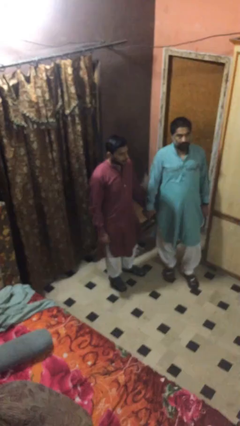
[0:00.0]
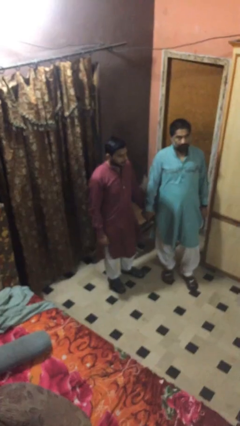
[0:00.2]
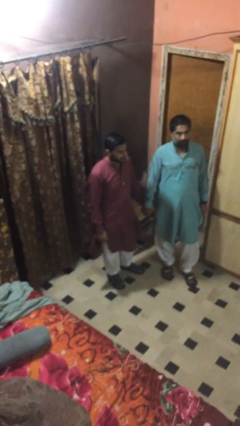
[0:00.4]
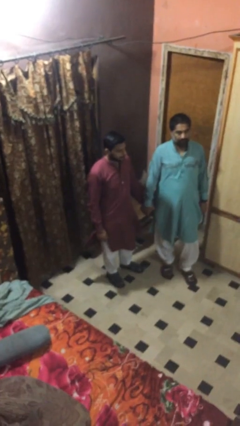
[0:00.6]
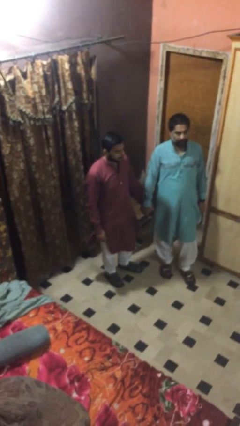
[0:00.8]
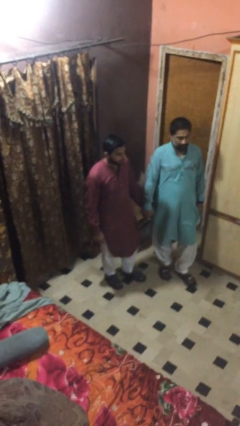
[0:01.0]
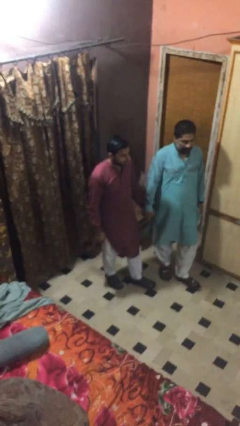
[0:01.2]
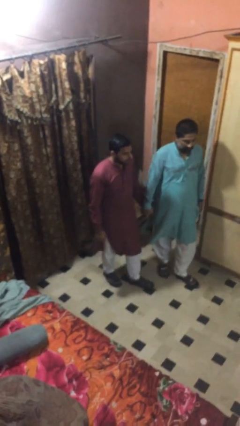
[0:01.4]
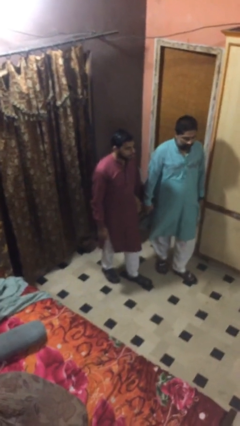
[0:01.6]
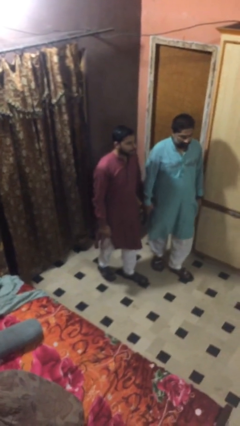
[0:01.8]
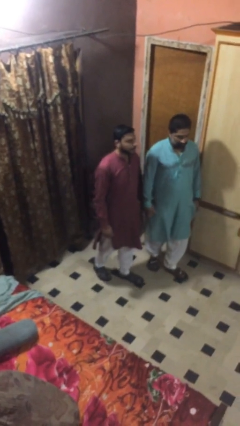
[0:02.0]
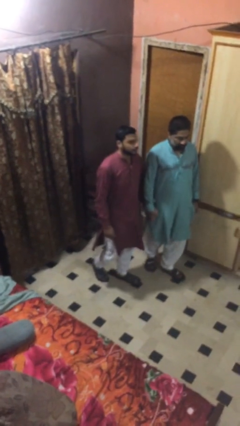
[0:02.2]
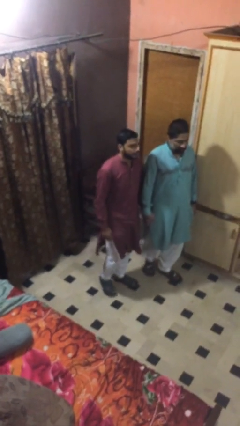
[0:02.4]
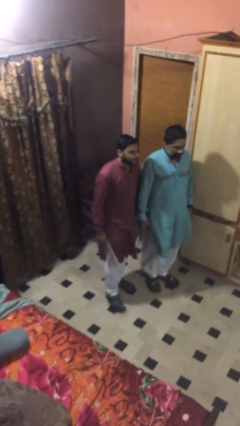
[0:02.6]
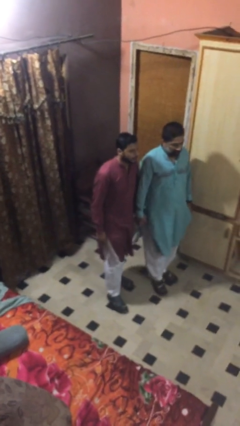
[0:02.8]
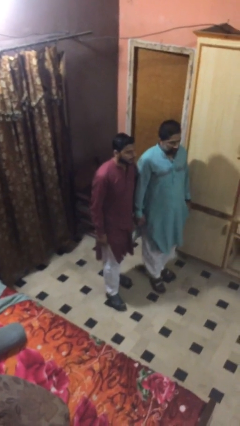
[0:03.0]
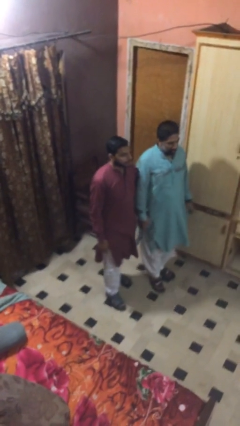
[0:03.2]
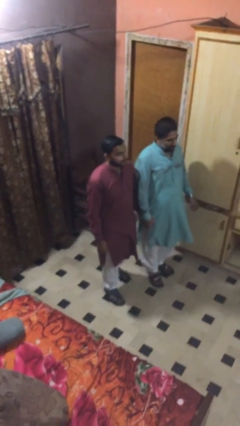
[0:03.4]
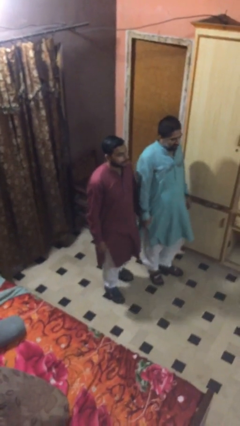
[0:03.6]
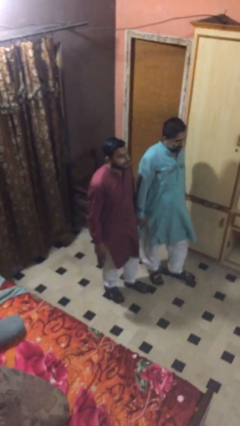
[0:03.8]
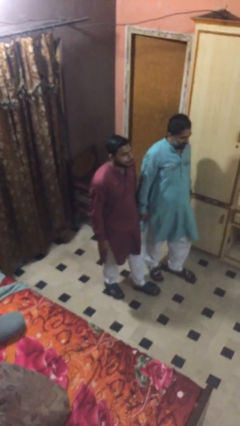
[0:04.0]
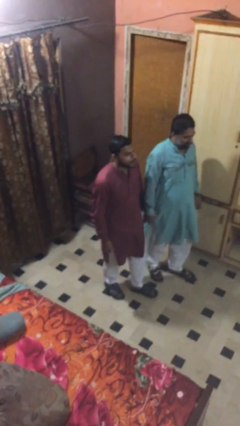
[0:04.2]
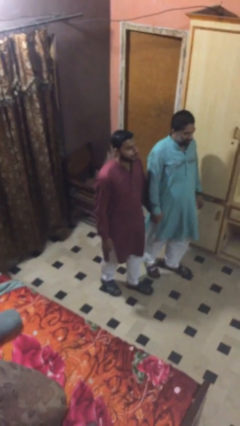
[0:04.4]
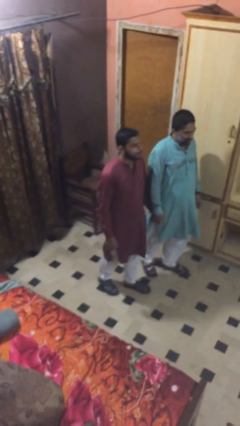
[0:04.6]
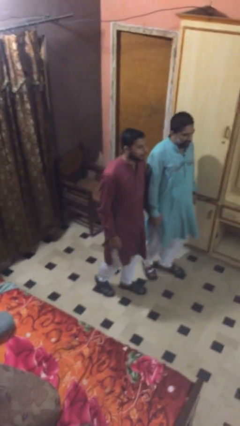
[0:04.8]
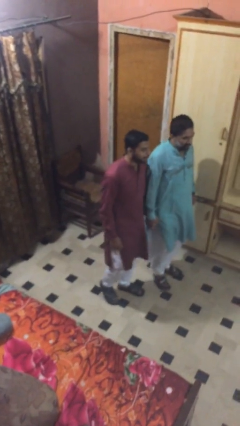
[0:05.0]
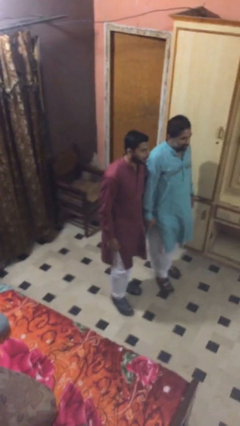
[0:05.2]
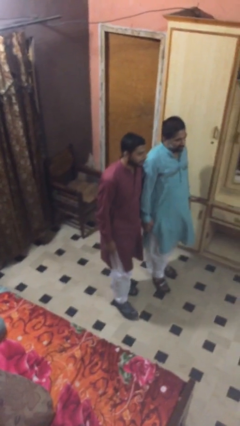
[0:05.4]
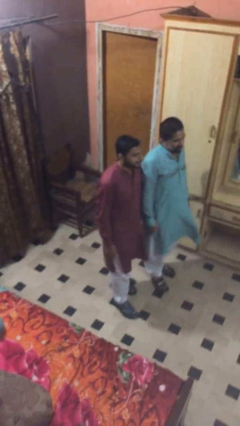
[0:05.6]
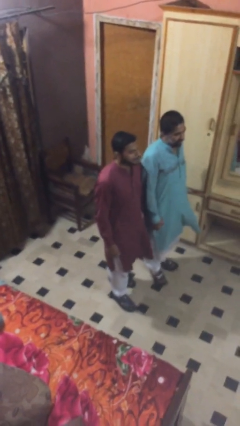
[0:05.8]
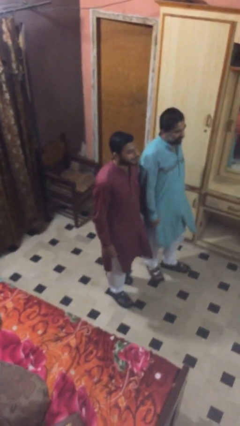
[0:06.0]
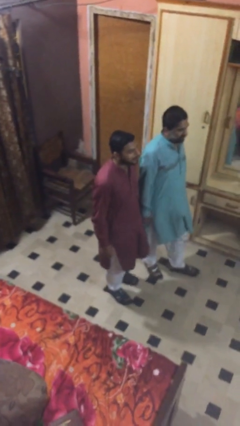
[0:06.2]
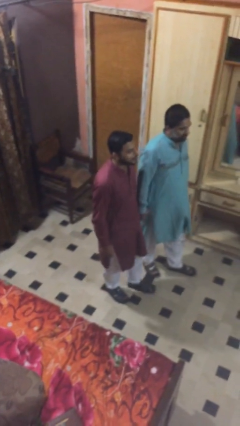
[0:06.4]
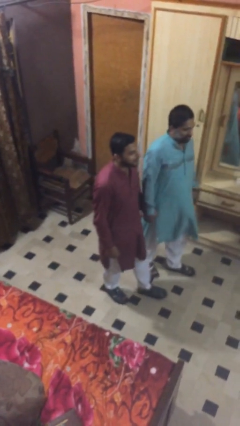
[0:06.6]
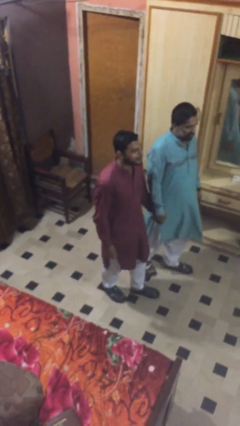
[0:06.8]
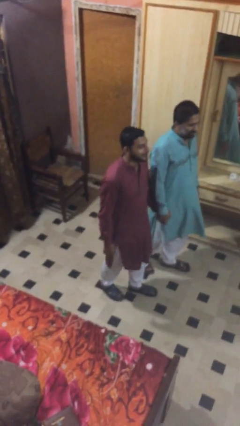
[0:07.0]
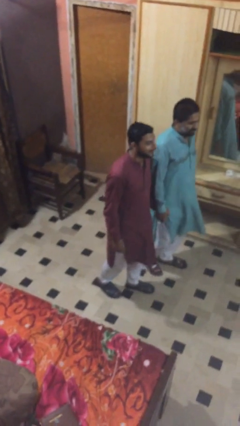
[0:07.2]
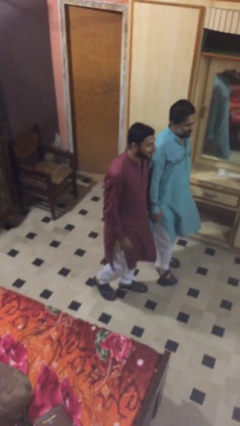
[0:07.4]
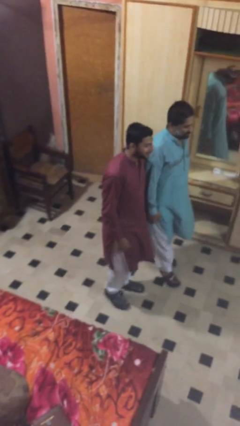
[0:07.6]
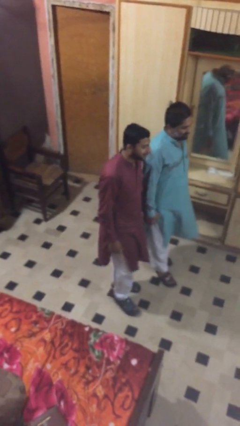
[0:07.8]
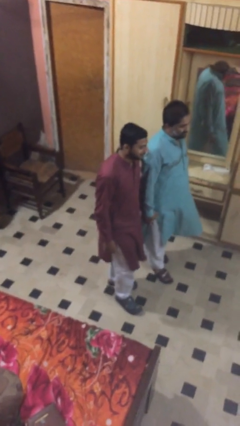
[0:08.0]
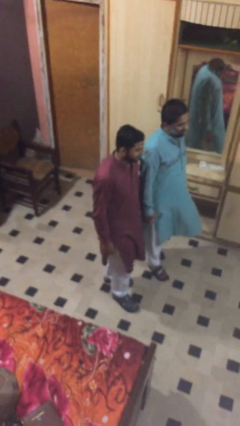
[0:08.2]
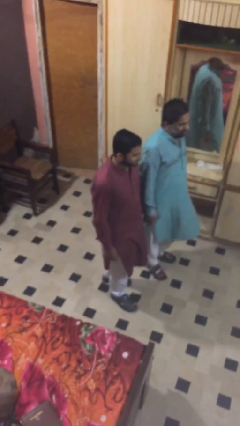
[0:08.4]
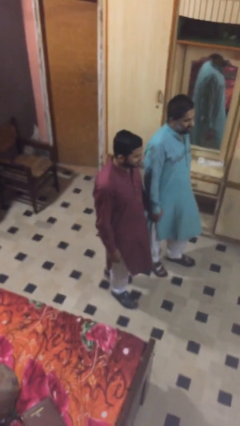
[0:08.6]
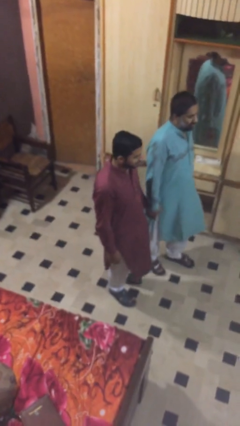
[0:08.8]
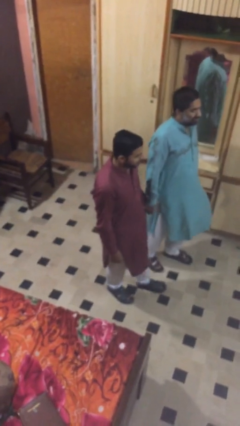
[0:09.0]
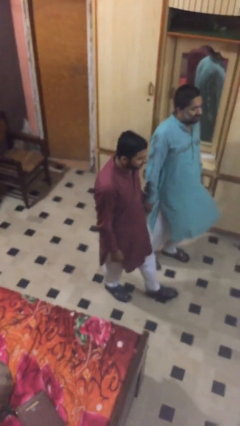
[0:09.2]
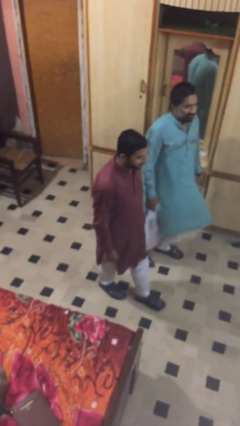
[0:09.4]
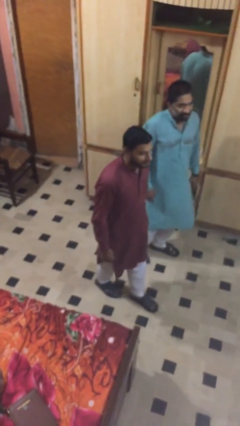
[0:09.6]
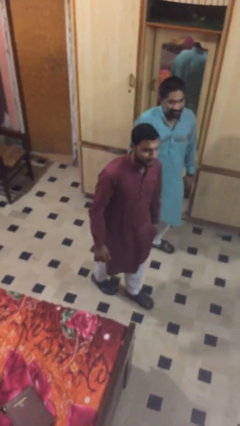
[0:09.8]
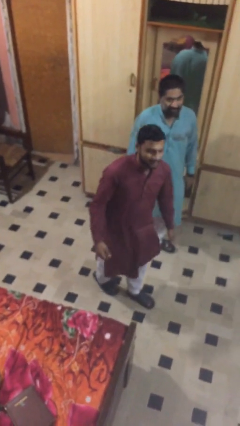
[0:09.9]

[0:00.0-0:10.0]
person holds hand

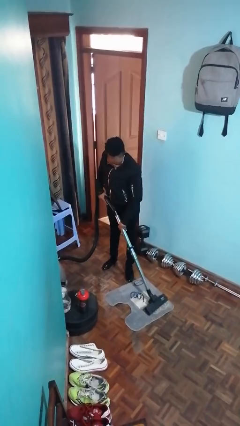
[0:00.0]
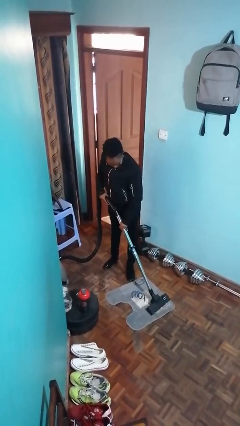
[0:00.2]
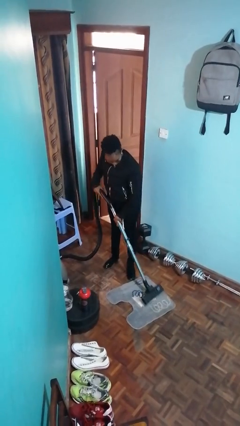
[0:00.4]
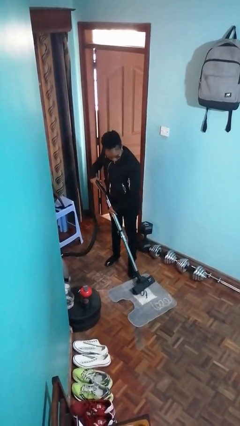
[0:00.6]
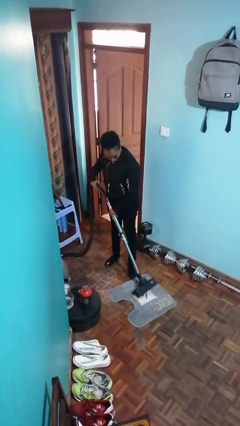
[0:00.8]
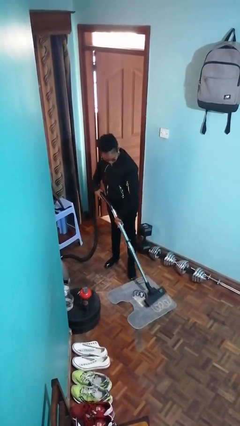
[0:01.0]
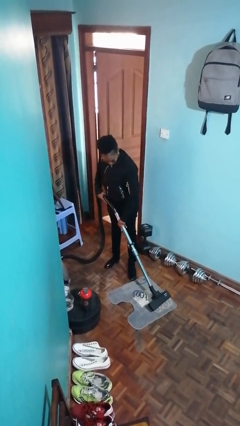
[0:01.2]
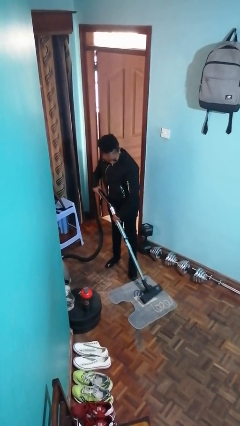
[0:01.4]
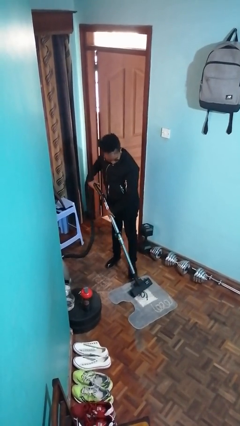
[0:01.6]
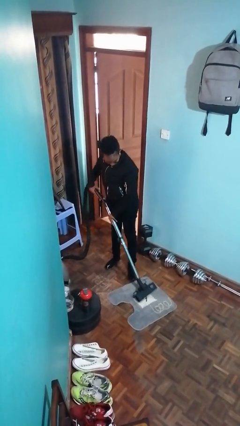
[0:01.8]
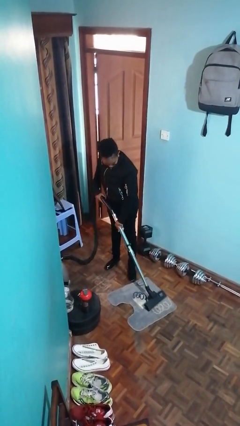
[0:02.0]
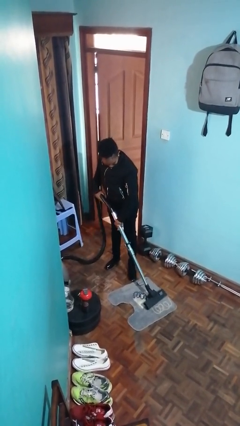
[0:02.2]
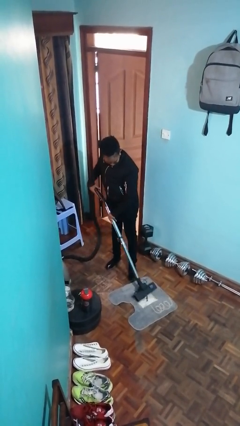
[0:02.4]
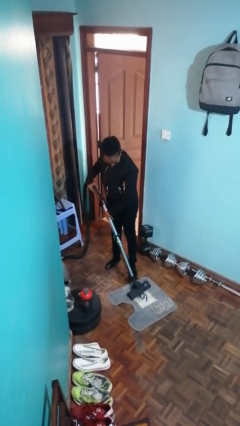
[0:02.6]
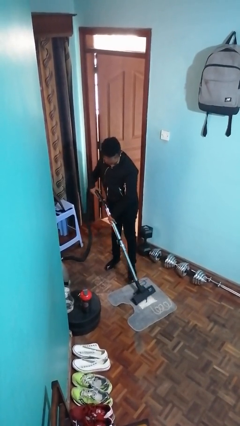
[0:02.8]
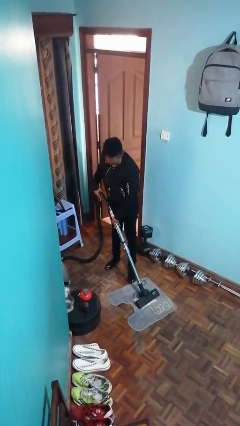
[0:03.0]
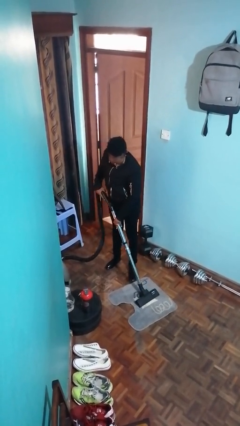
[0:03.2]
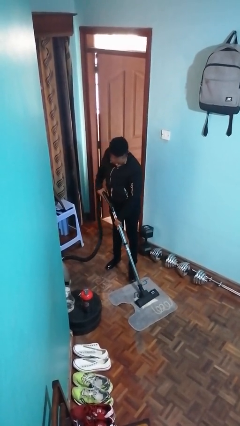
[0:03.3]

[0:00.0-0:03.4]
person vacuums carpet

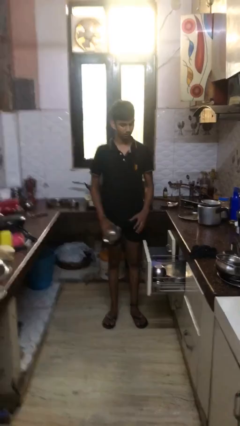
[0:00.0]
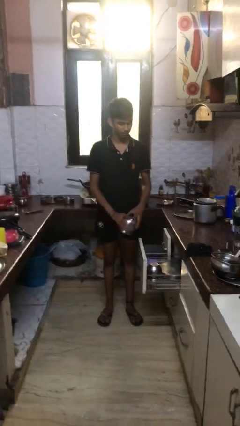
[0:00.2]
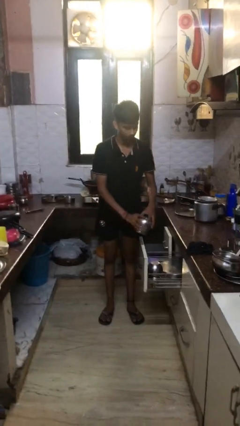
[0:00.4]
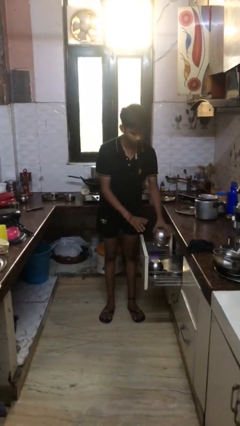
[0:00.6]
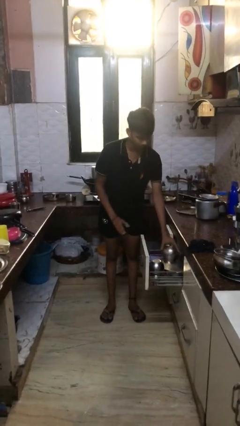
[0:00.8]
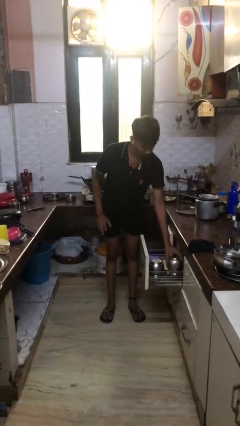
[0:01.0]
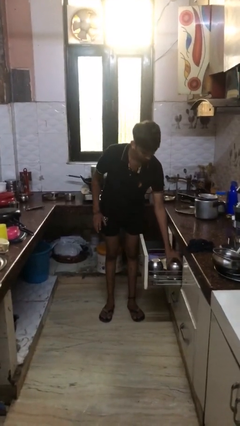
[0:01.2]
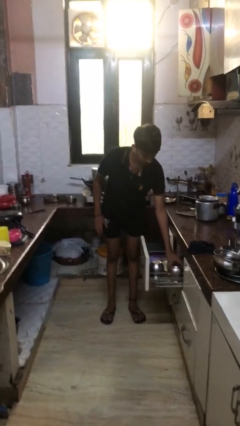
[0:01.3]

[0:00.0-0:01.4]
person puts object into kitchen drawer

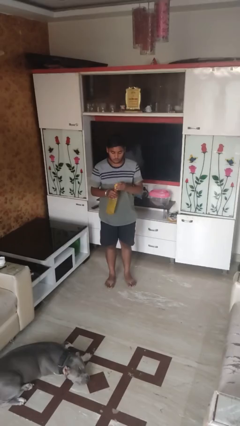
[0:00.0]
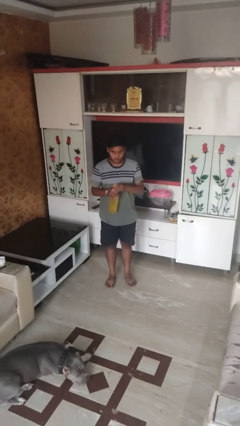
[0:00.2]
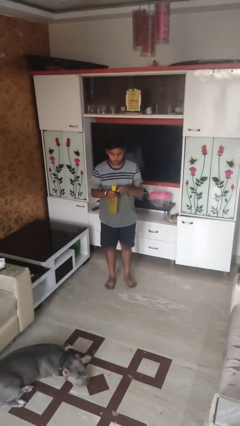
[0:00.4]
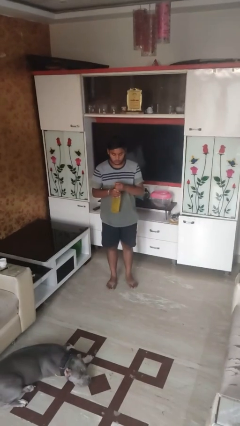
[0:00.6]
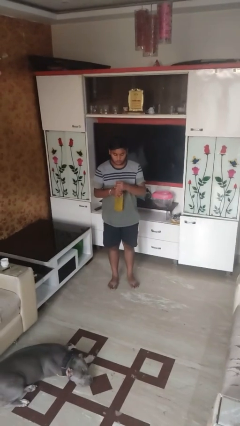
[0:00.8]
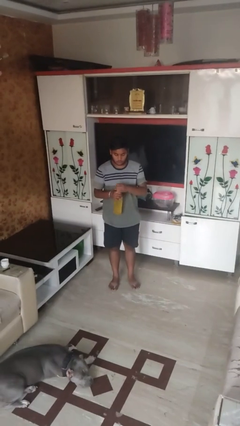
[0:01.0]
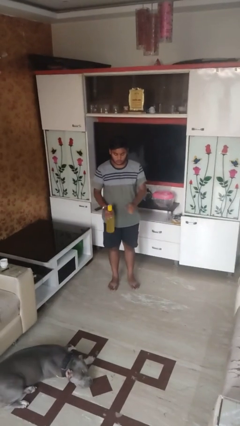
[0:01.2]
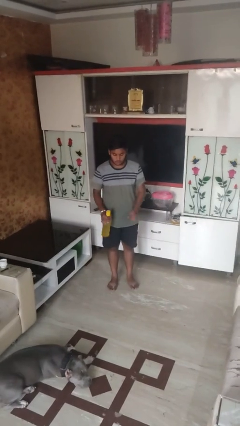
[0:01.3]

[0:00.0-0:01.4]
person screws lid to bottle

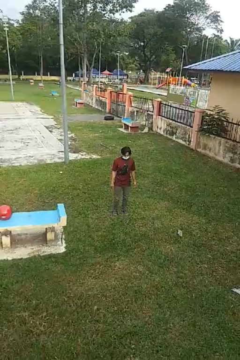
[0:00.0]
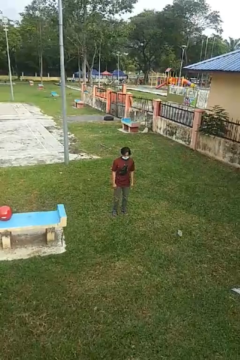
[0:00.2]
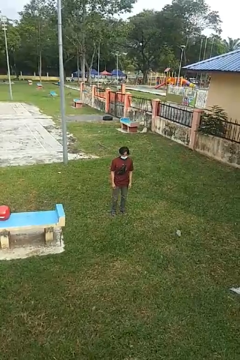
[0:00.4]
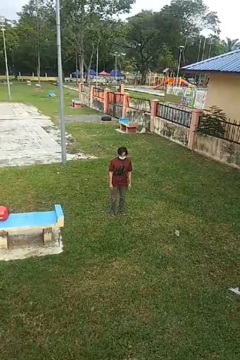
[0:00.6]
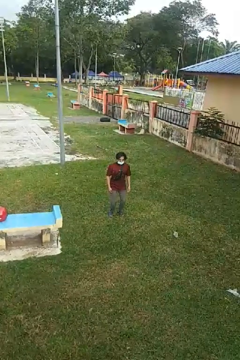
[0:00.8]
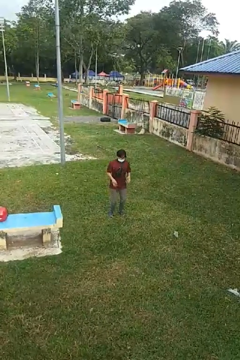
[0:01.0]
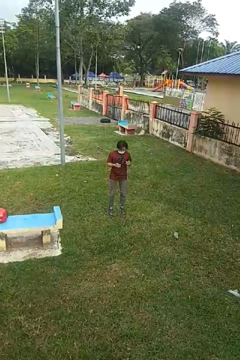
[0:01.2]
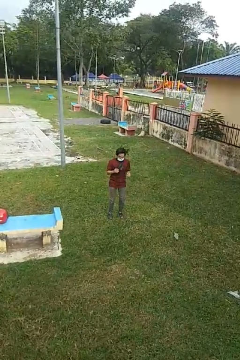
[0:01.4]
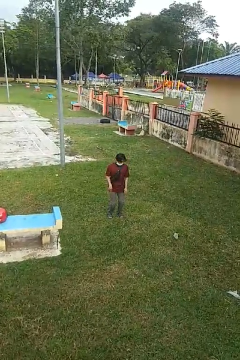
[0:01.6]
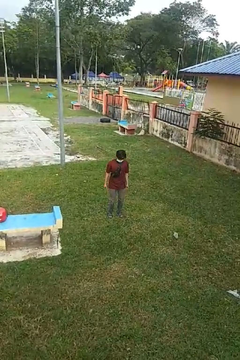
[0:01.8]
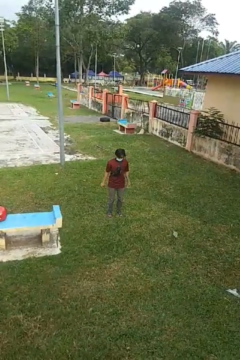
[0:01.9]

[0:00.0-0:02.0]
person jumps
